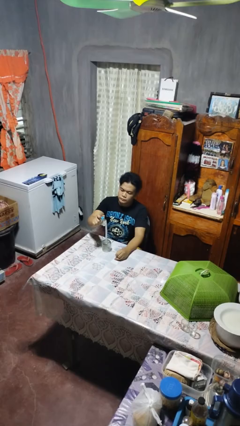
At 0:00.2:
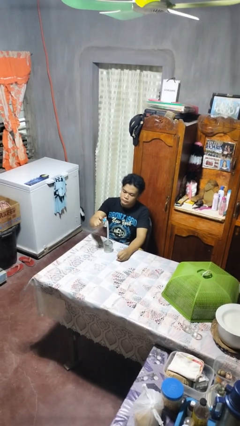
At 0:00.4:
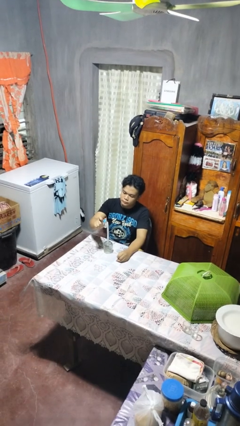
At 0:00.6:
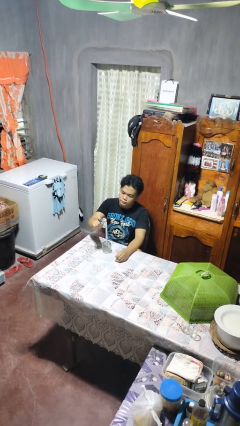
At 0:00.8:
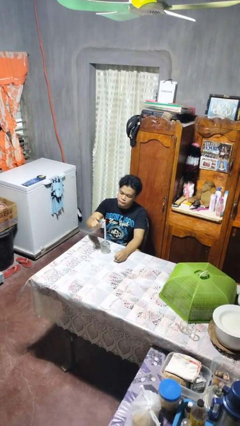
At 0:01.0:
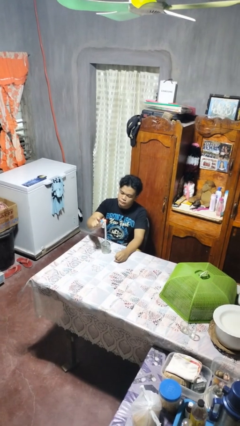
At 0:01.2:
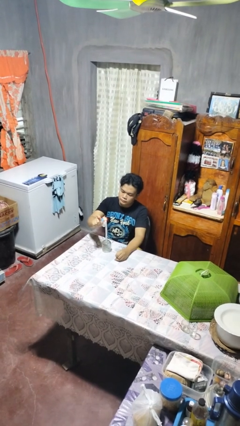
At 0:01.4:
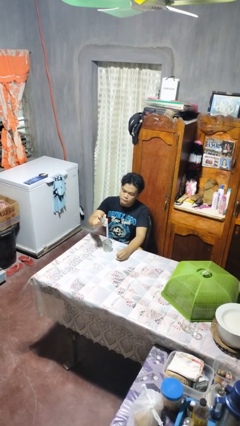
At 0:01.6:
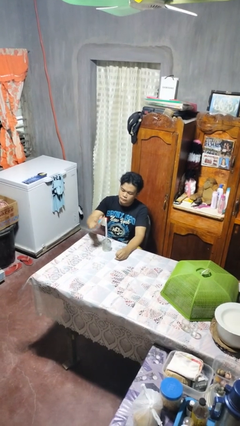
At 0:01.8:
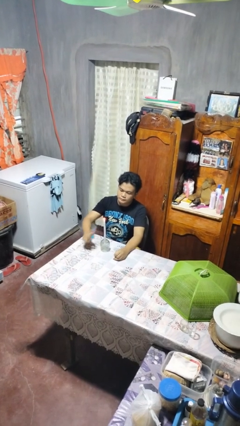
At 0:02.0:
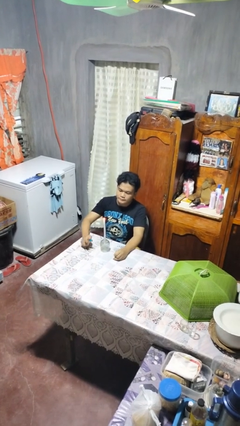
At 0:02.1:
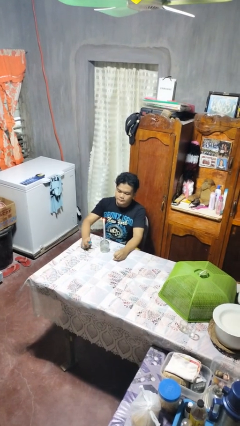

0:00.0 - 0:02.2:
person lights candle

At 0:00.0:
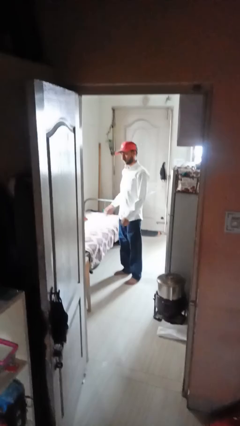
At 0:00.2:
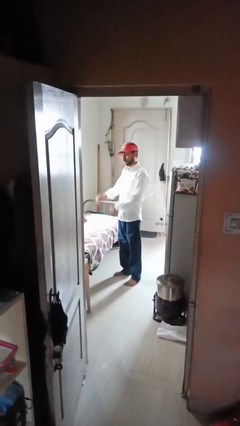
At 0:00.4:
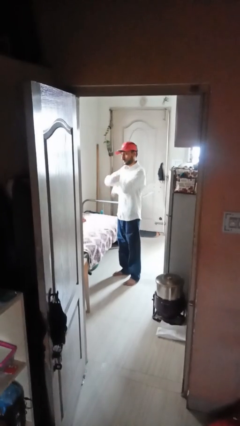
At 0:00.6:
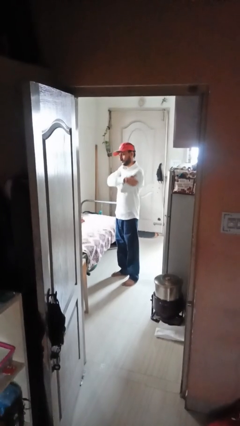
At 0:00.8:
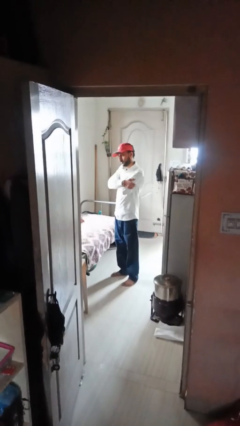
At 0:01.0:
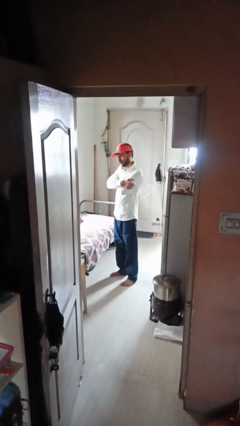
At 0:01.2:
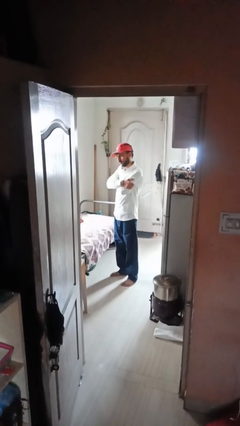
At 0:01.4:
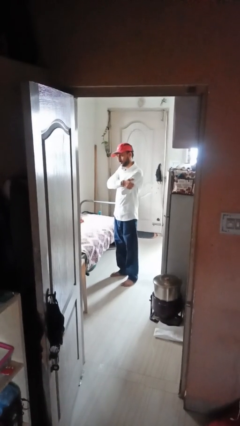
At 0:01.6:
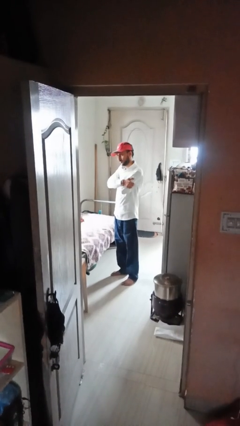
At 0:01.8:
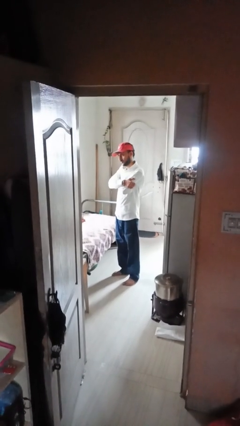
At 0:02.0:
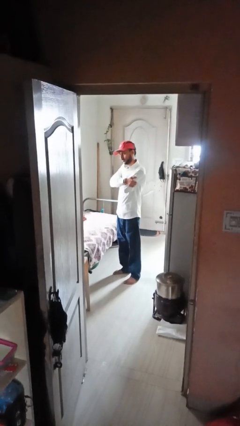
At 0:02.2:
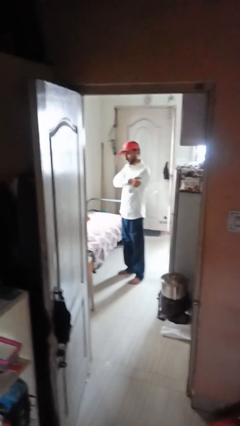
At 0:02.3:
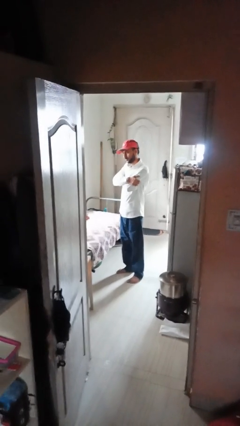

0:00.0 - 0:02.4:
person crosses arms

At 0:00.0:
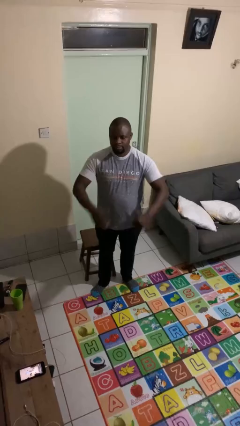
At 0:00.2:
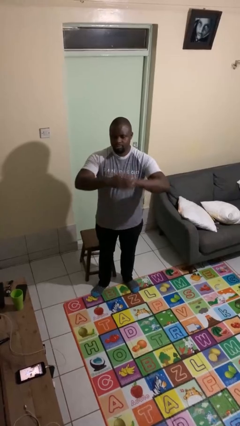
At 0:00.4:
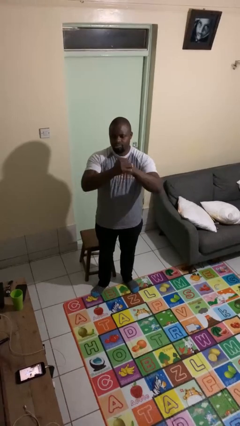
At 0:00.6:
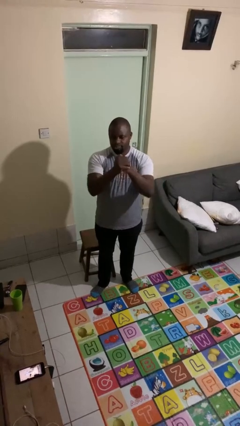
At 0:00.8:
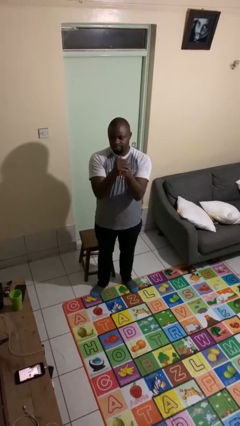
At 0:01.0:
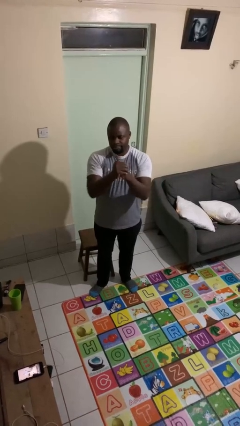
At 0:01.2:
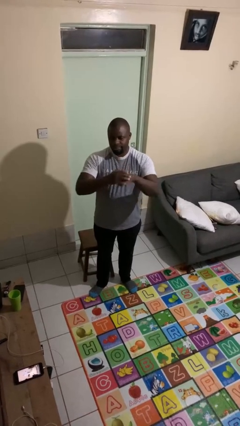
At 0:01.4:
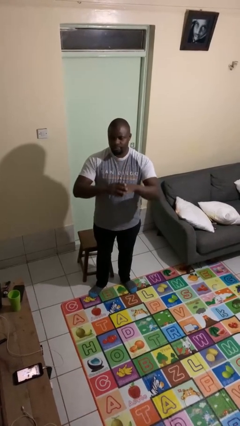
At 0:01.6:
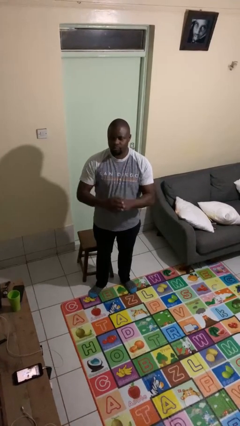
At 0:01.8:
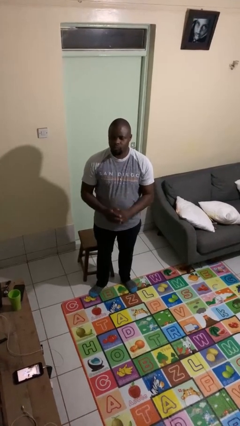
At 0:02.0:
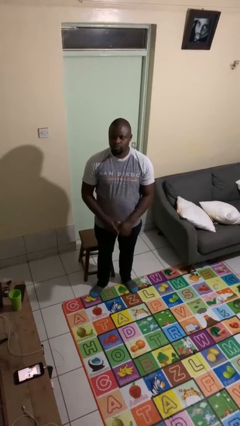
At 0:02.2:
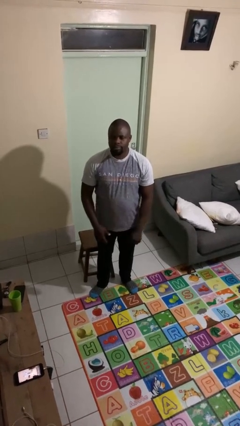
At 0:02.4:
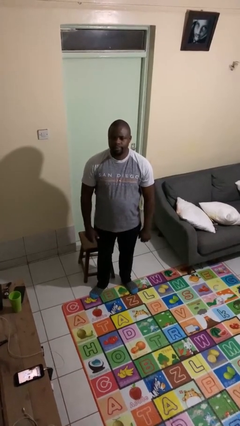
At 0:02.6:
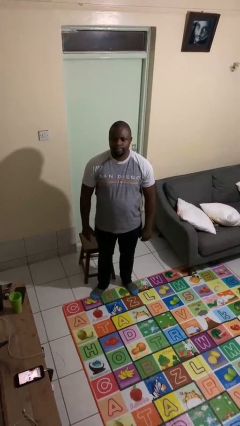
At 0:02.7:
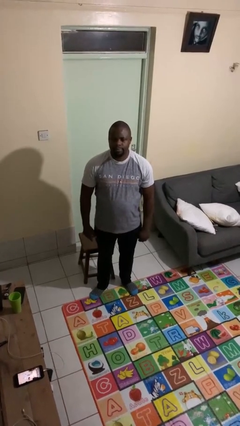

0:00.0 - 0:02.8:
person cracks knuckles

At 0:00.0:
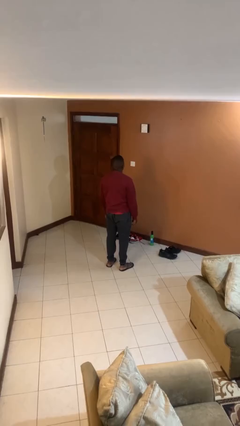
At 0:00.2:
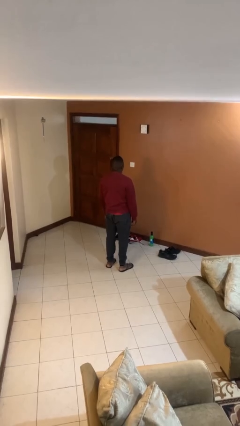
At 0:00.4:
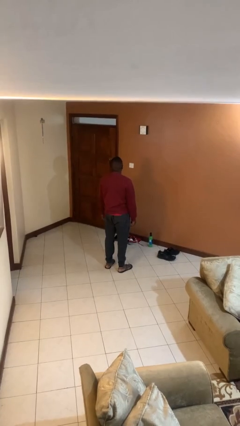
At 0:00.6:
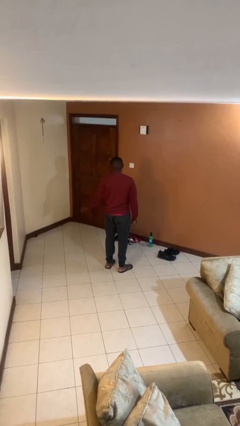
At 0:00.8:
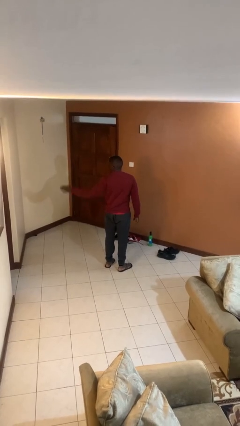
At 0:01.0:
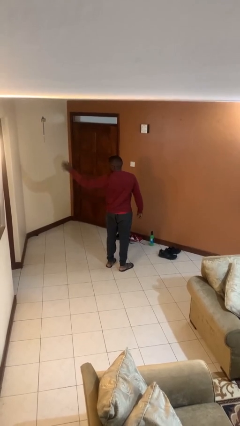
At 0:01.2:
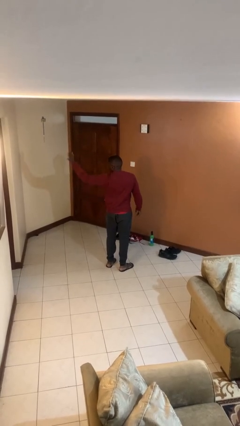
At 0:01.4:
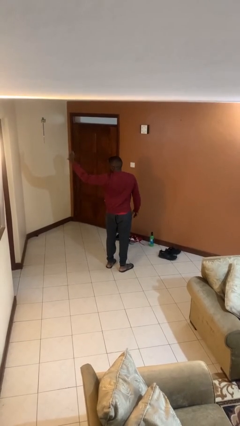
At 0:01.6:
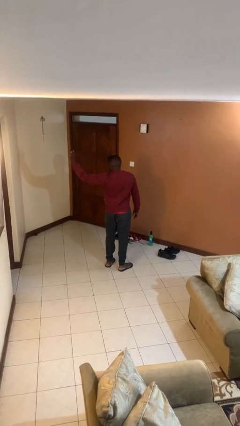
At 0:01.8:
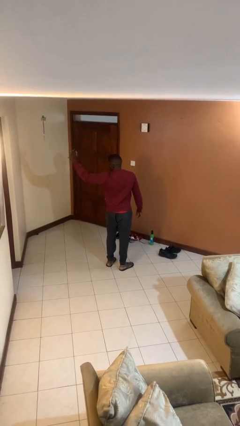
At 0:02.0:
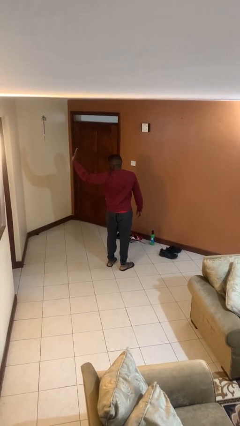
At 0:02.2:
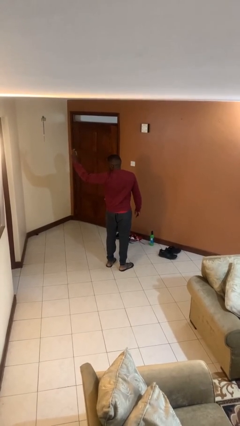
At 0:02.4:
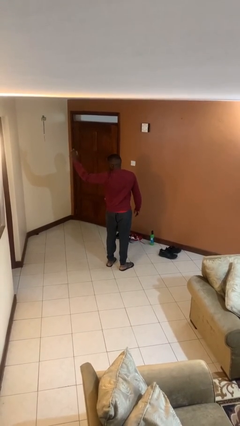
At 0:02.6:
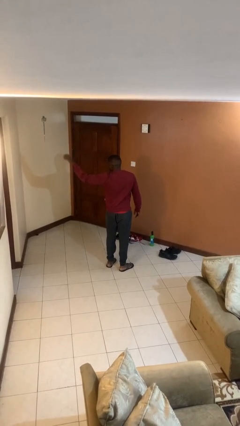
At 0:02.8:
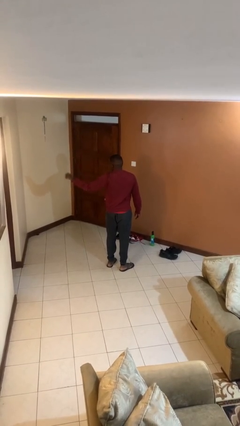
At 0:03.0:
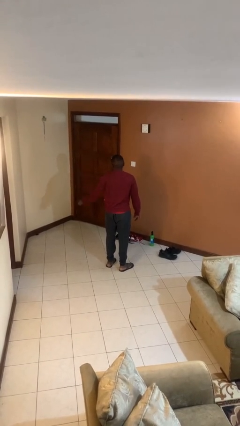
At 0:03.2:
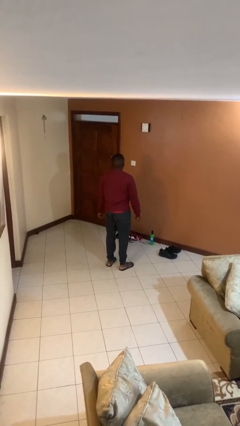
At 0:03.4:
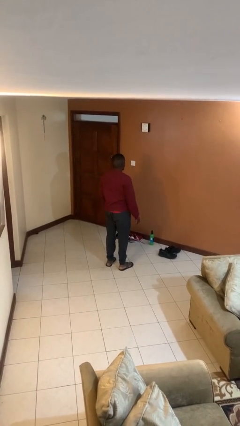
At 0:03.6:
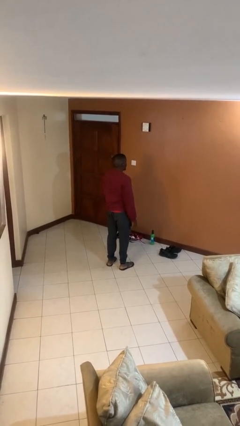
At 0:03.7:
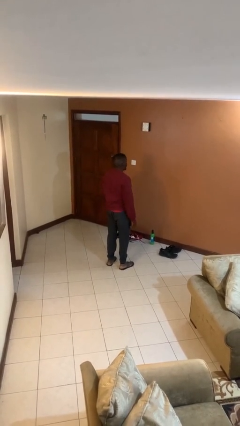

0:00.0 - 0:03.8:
person waves at person

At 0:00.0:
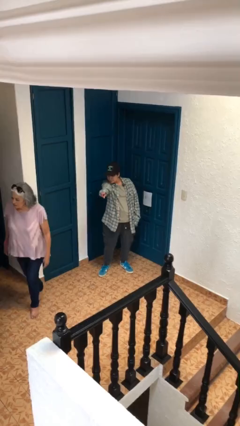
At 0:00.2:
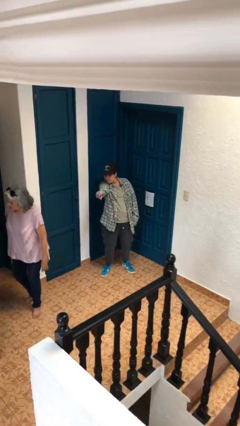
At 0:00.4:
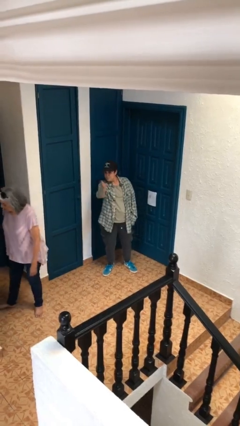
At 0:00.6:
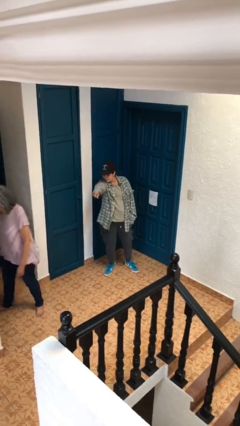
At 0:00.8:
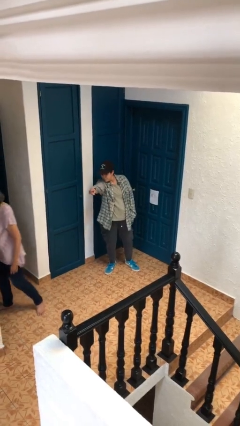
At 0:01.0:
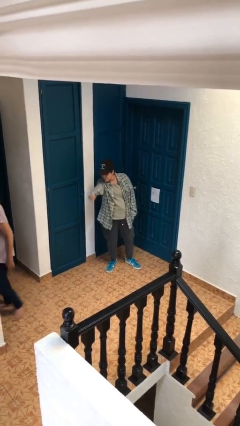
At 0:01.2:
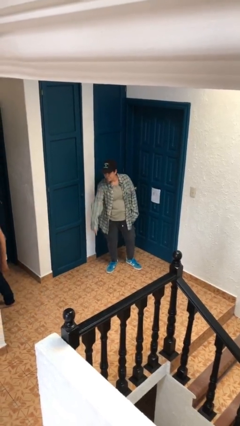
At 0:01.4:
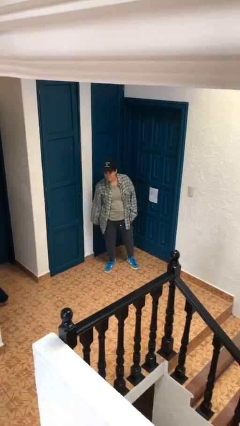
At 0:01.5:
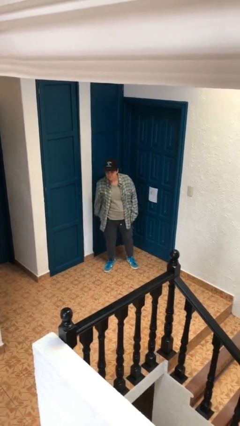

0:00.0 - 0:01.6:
person points at person

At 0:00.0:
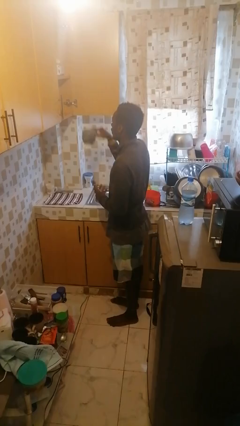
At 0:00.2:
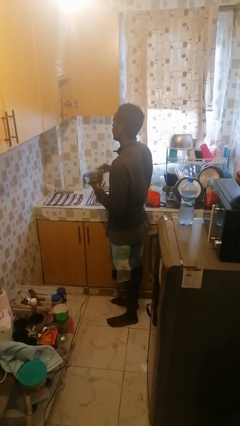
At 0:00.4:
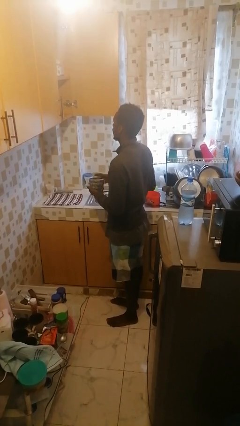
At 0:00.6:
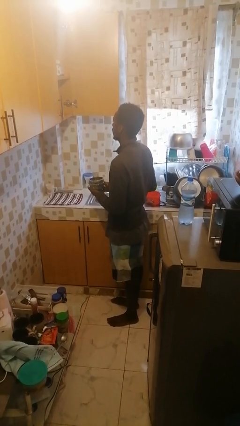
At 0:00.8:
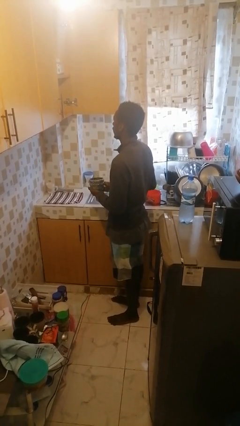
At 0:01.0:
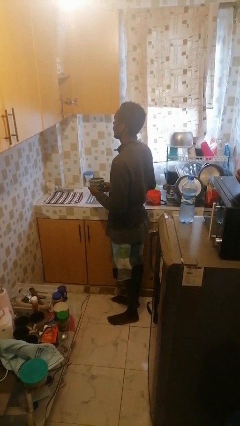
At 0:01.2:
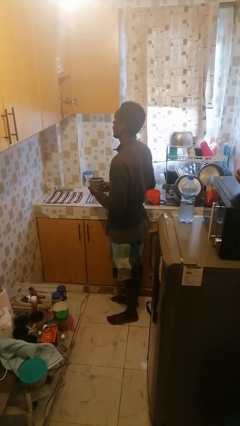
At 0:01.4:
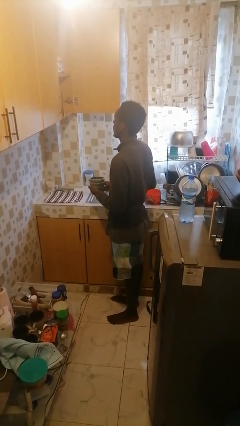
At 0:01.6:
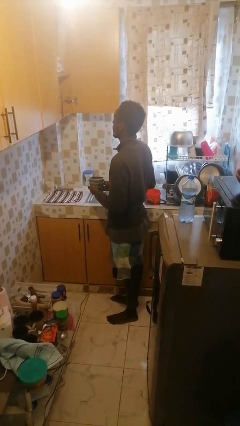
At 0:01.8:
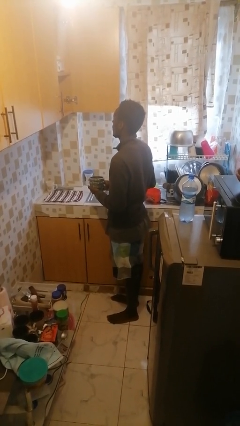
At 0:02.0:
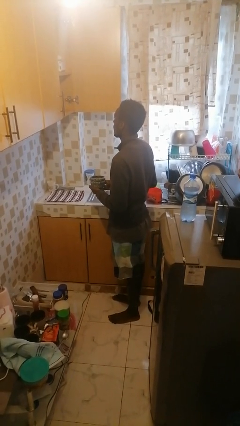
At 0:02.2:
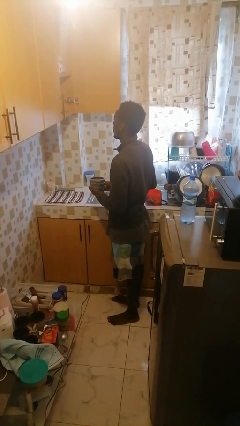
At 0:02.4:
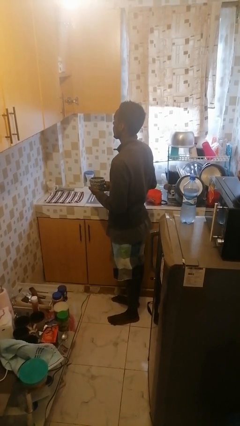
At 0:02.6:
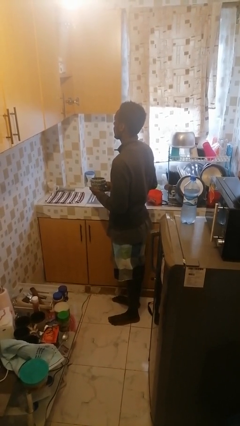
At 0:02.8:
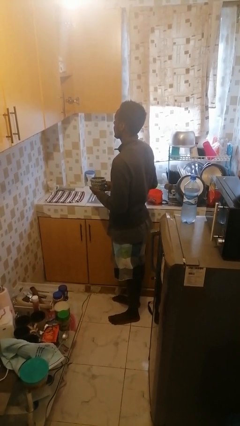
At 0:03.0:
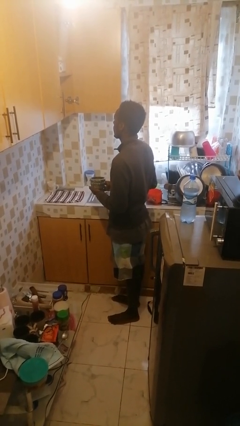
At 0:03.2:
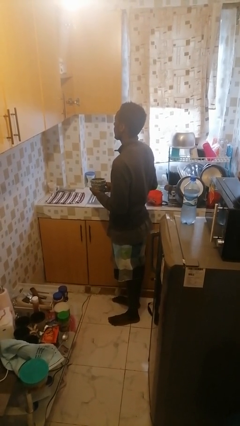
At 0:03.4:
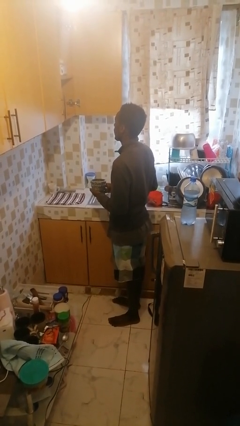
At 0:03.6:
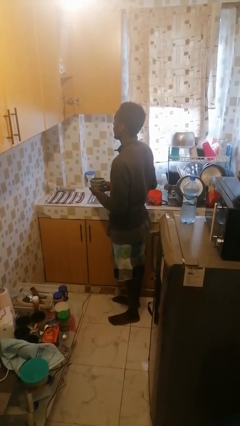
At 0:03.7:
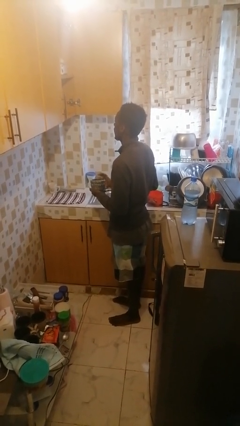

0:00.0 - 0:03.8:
person picks up object from cabinet

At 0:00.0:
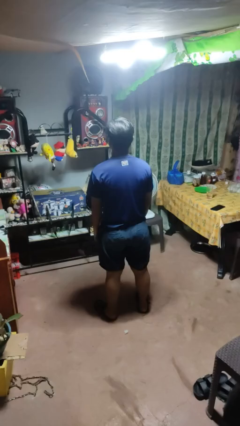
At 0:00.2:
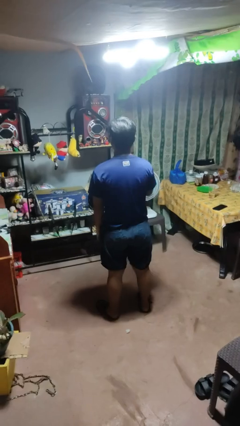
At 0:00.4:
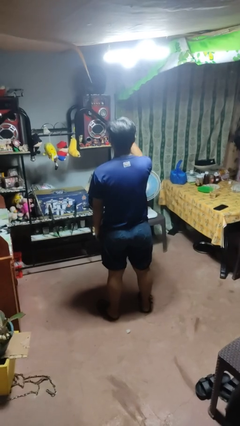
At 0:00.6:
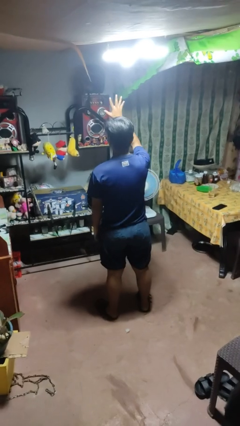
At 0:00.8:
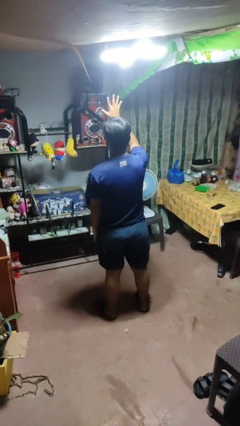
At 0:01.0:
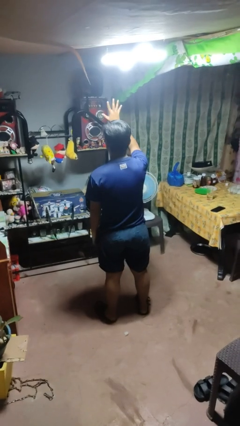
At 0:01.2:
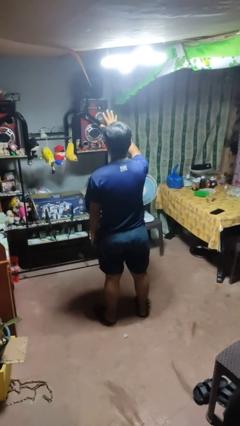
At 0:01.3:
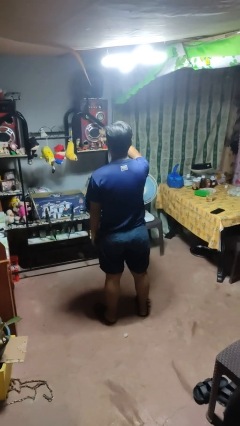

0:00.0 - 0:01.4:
person gestures number five
